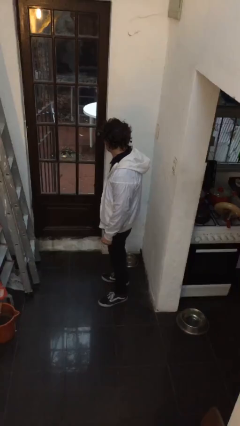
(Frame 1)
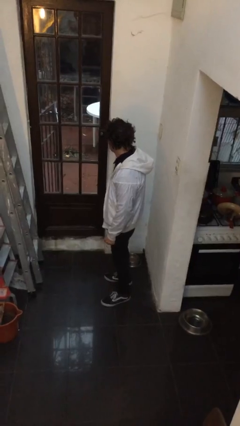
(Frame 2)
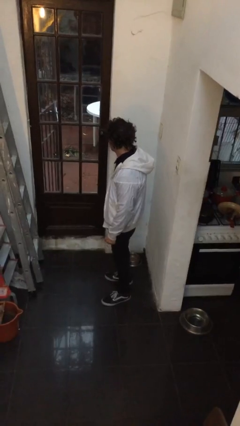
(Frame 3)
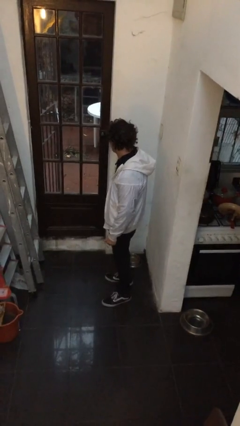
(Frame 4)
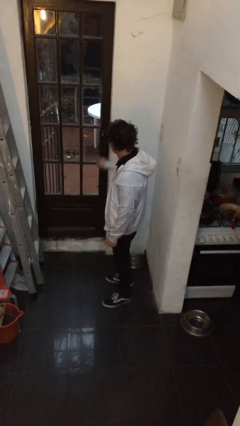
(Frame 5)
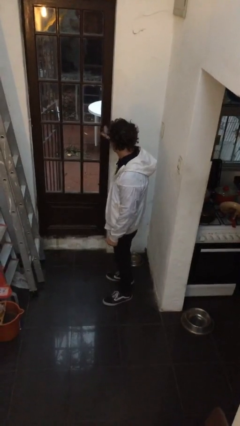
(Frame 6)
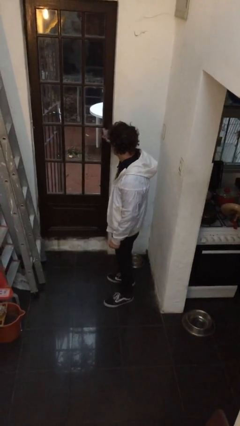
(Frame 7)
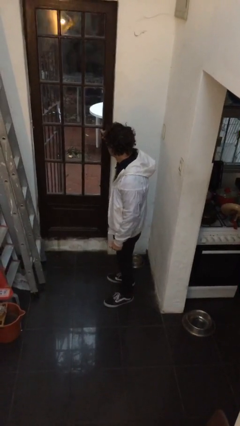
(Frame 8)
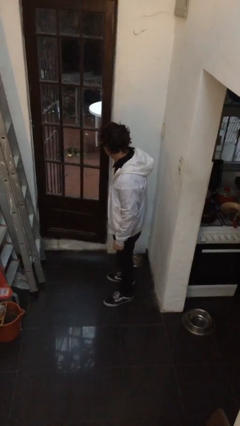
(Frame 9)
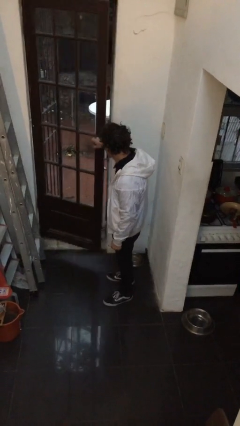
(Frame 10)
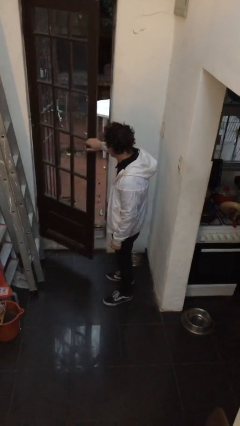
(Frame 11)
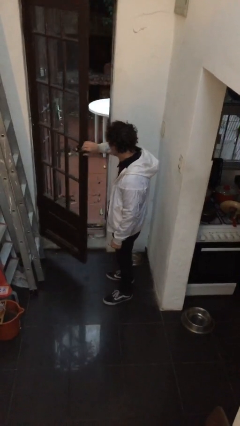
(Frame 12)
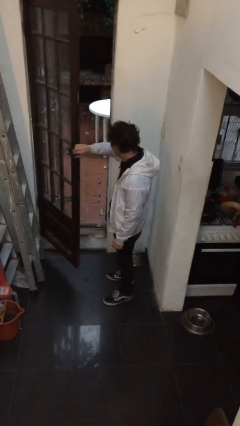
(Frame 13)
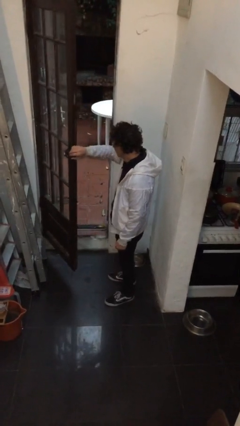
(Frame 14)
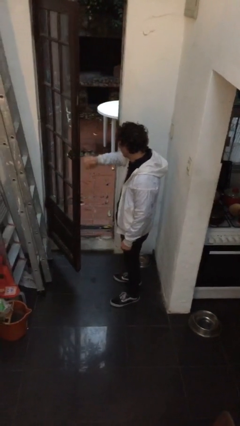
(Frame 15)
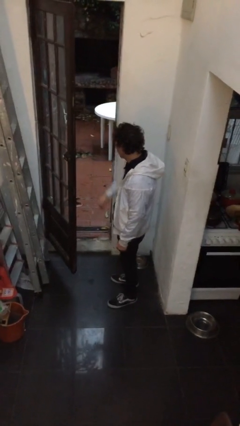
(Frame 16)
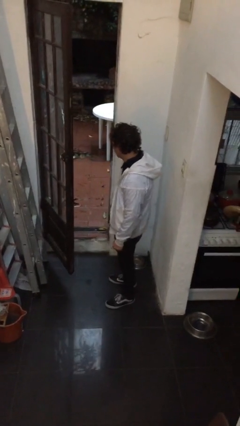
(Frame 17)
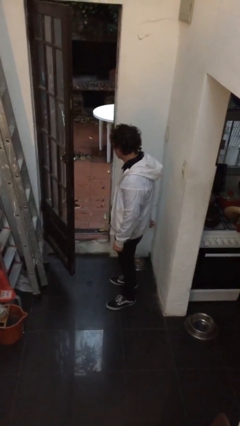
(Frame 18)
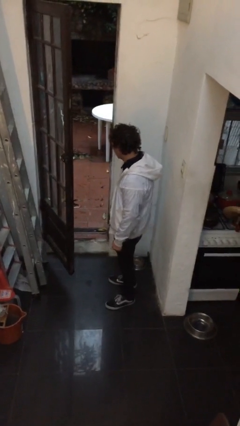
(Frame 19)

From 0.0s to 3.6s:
person opens facility door

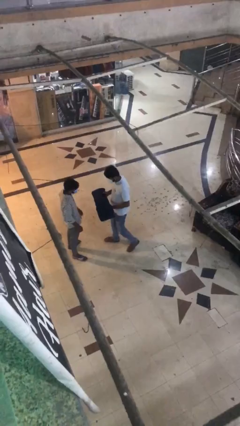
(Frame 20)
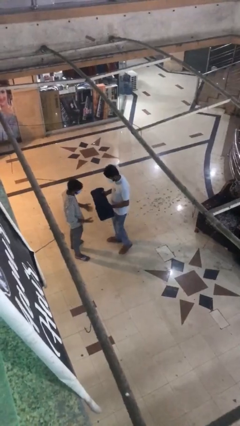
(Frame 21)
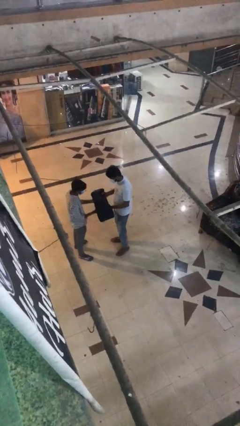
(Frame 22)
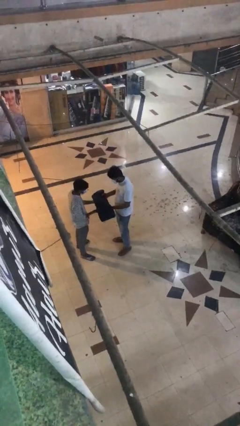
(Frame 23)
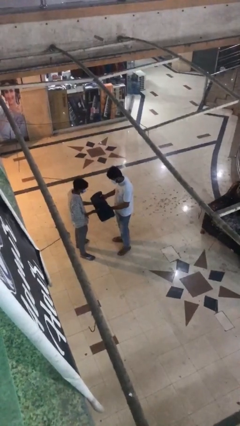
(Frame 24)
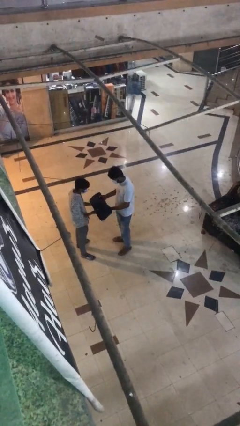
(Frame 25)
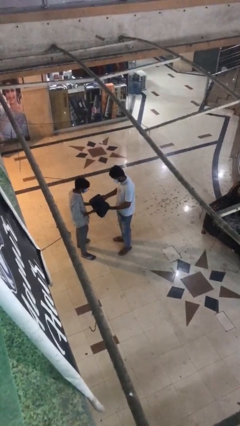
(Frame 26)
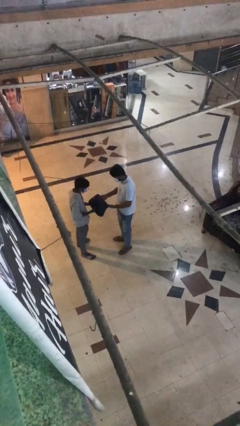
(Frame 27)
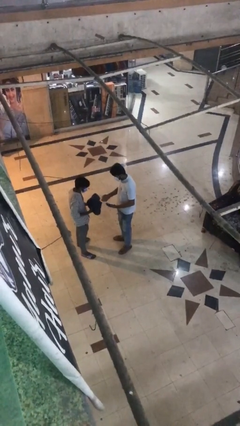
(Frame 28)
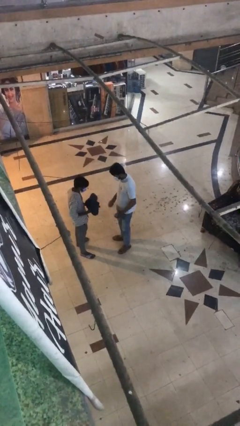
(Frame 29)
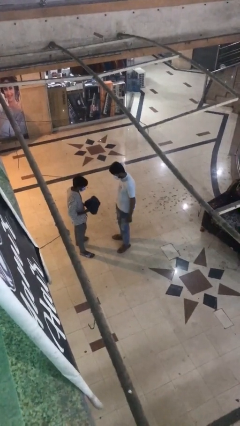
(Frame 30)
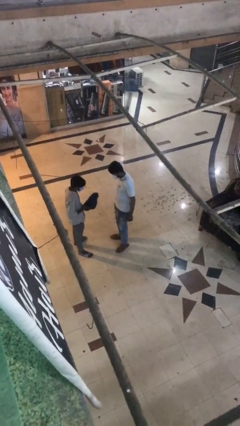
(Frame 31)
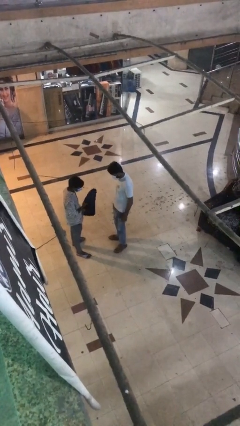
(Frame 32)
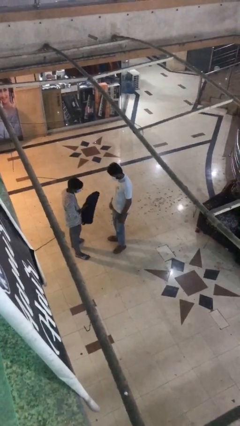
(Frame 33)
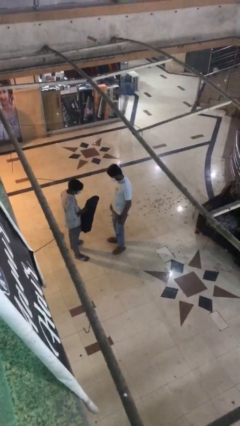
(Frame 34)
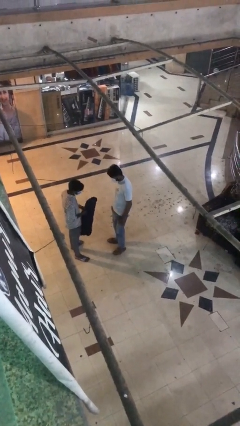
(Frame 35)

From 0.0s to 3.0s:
person transfers object to person

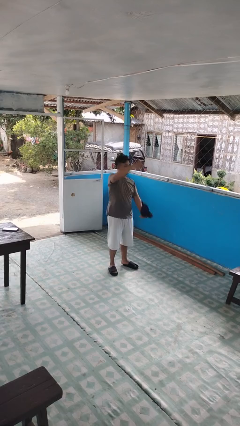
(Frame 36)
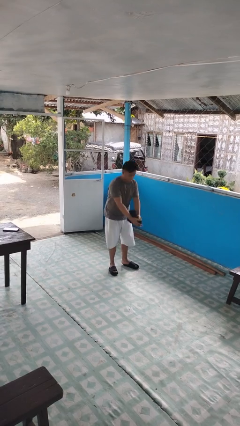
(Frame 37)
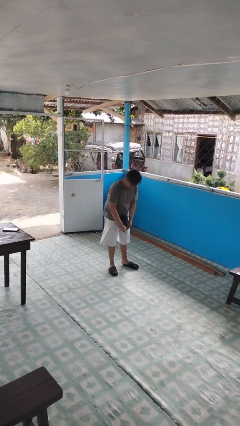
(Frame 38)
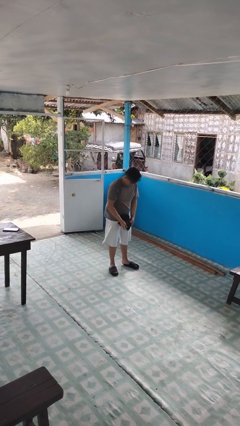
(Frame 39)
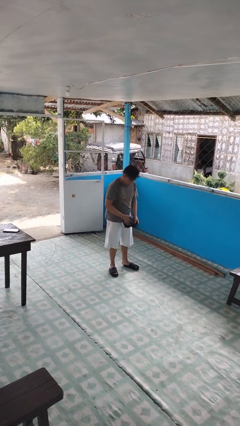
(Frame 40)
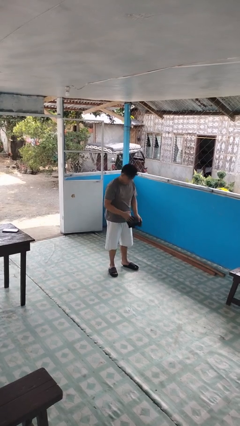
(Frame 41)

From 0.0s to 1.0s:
person catches dropped object

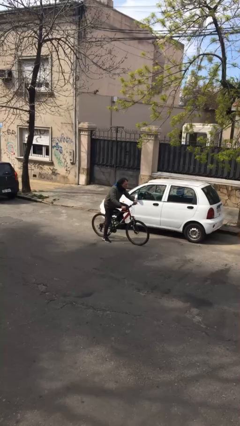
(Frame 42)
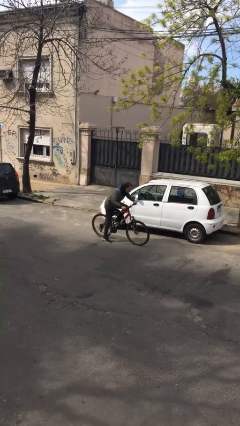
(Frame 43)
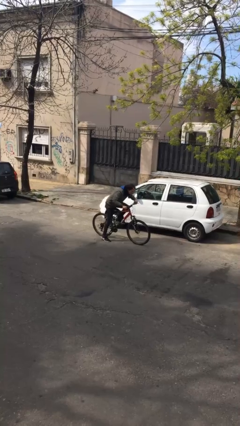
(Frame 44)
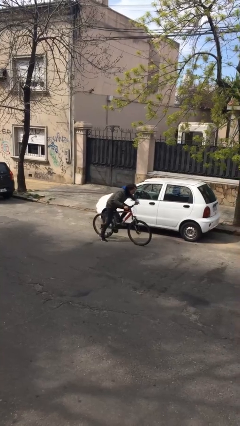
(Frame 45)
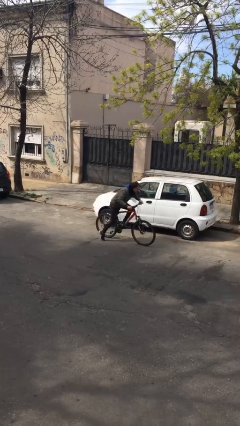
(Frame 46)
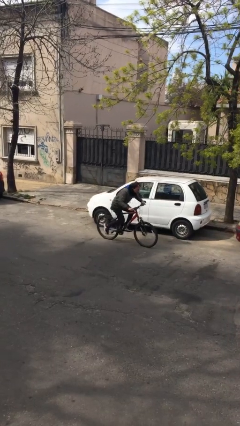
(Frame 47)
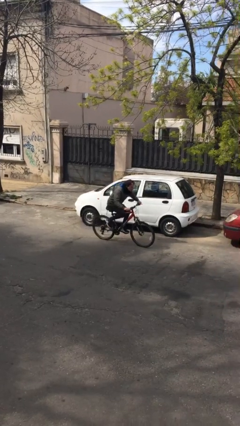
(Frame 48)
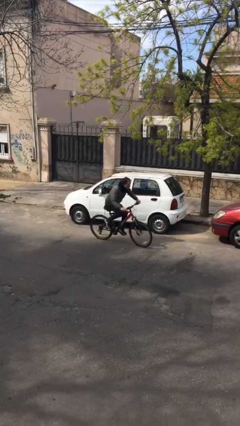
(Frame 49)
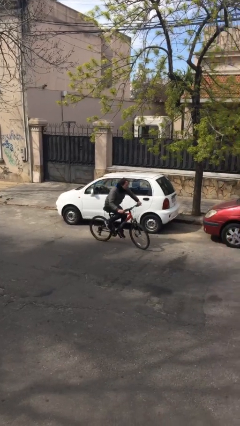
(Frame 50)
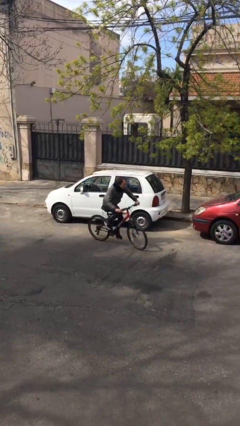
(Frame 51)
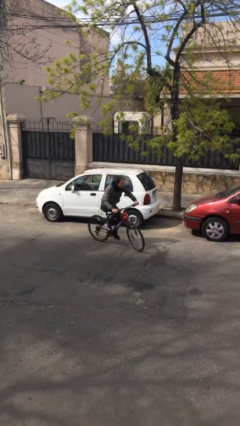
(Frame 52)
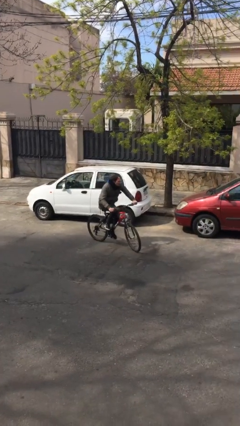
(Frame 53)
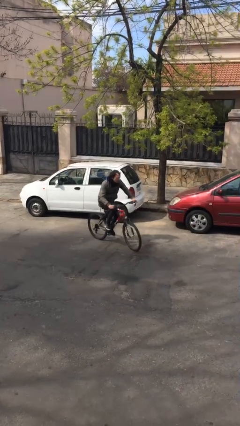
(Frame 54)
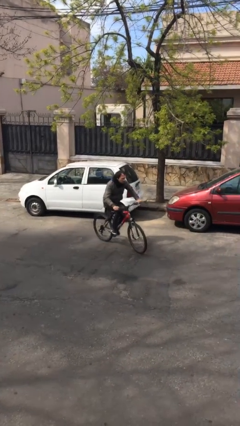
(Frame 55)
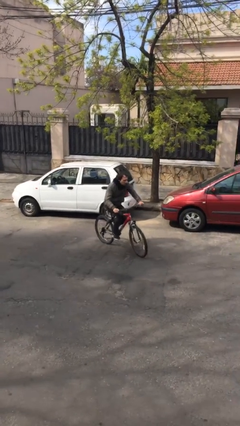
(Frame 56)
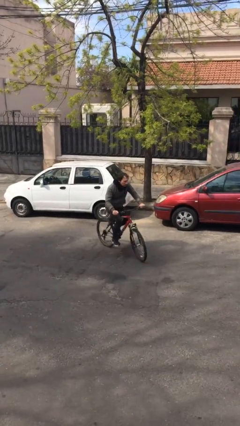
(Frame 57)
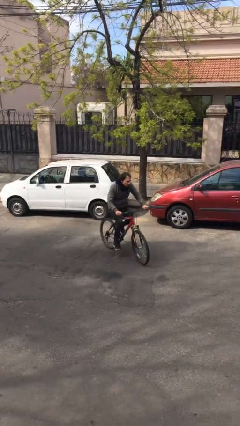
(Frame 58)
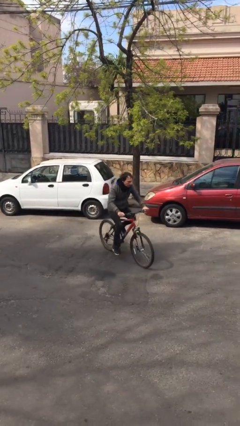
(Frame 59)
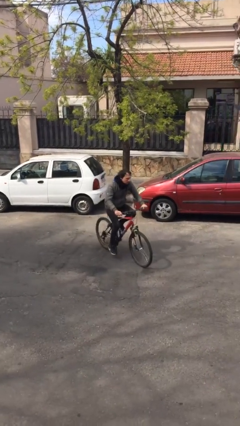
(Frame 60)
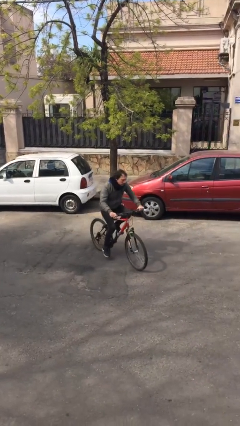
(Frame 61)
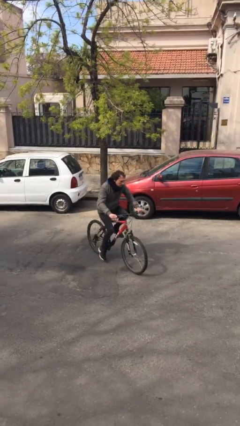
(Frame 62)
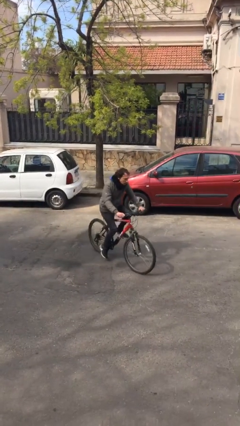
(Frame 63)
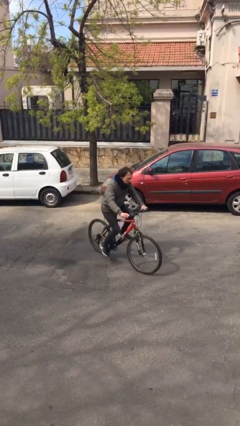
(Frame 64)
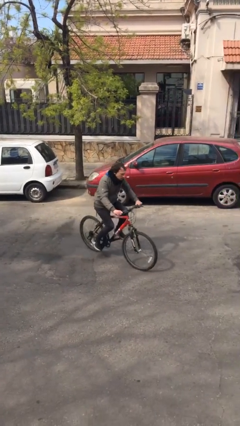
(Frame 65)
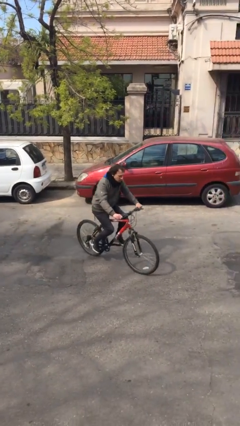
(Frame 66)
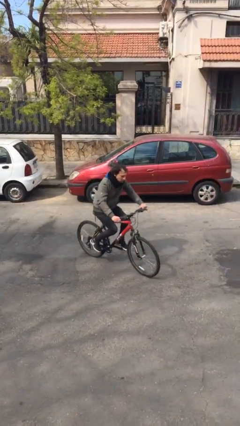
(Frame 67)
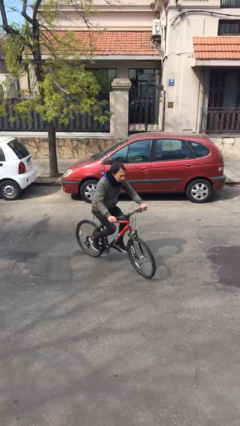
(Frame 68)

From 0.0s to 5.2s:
person rides bicycle

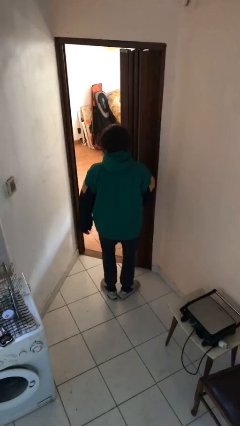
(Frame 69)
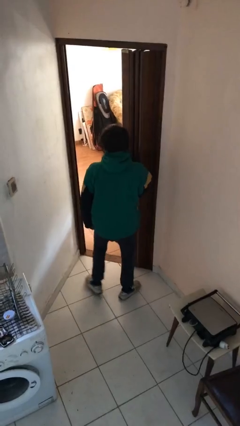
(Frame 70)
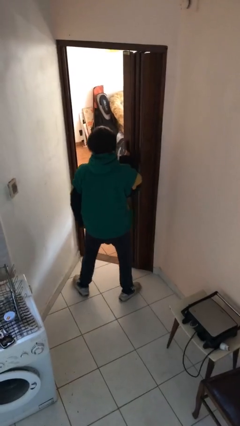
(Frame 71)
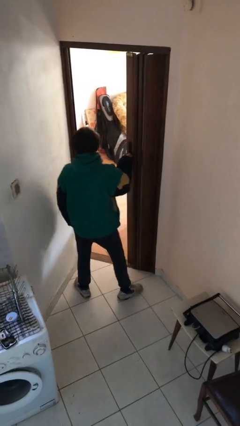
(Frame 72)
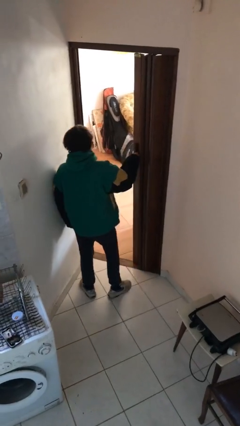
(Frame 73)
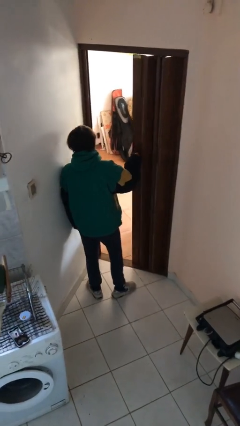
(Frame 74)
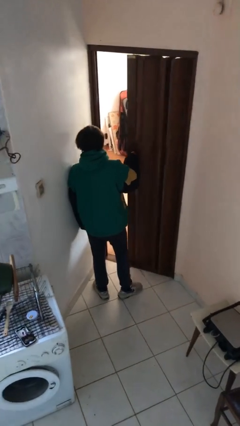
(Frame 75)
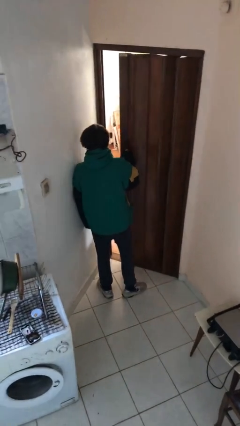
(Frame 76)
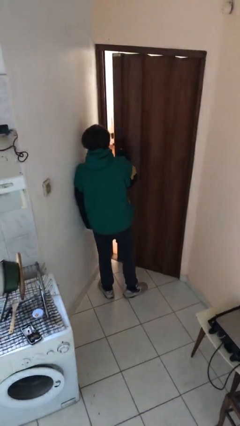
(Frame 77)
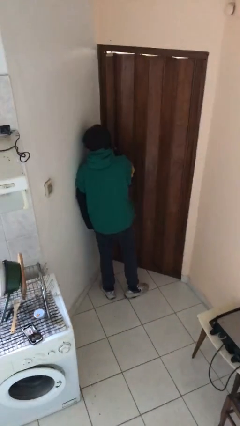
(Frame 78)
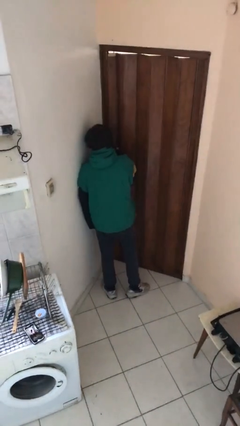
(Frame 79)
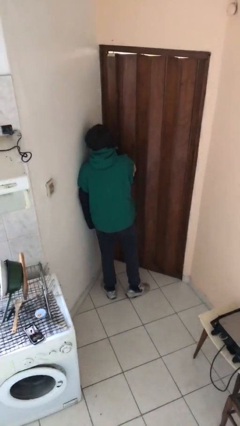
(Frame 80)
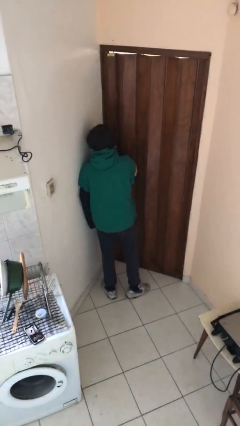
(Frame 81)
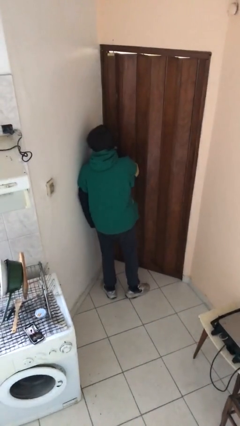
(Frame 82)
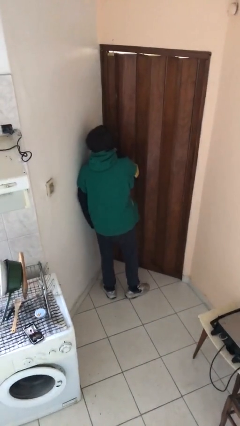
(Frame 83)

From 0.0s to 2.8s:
person closes sliding door

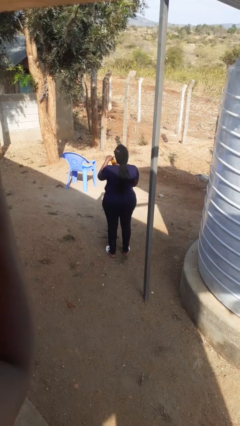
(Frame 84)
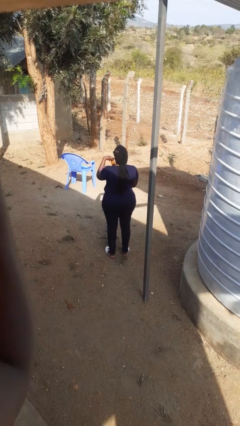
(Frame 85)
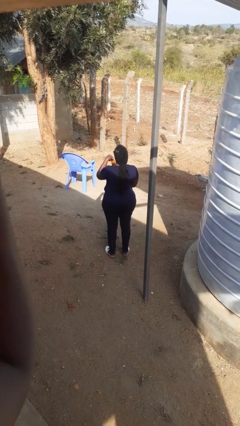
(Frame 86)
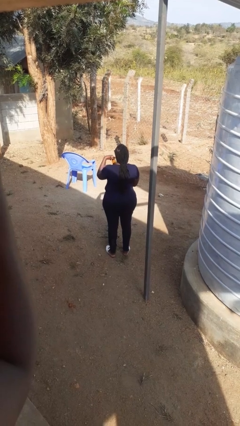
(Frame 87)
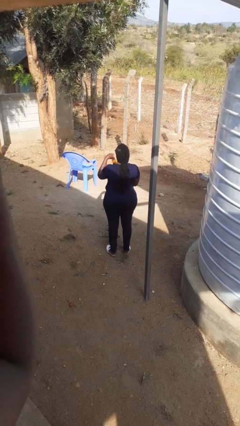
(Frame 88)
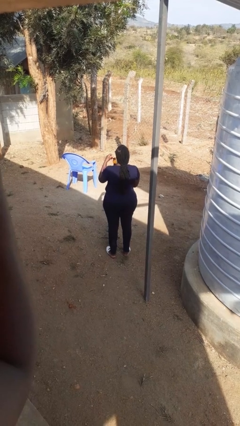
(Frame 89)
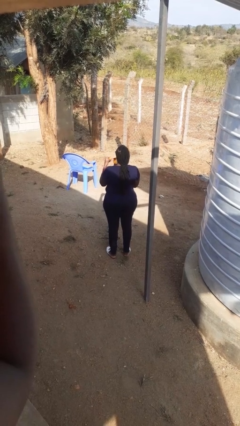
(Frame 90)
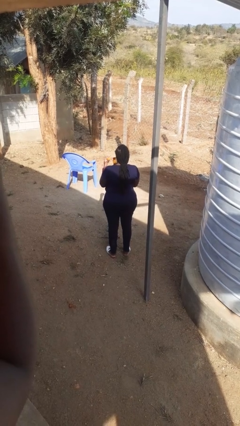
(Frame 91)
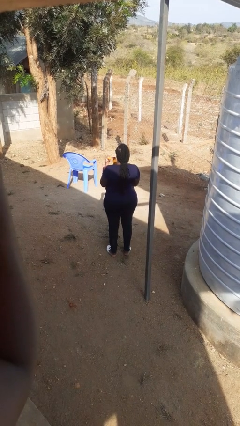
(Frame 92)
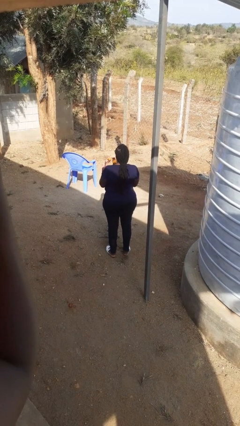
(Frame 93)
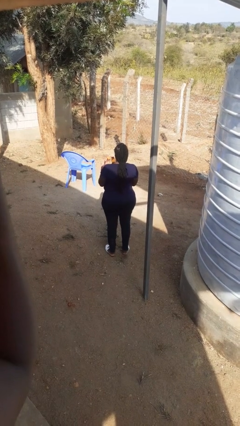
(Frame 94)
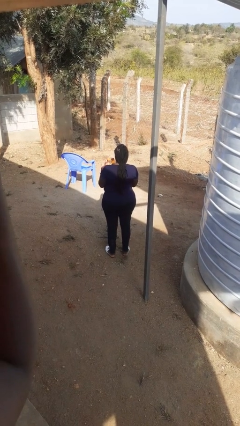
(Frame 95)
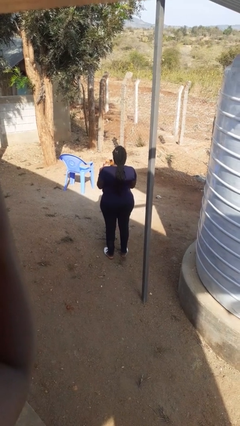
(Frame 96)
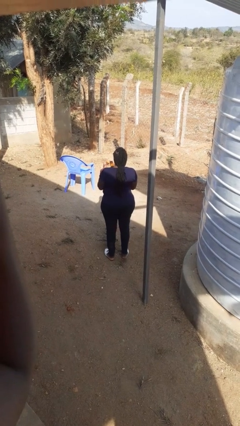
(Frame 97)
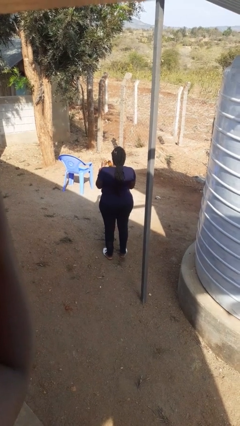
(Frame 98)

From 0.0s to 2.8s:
person opens jar
